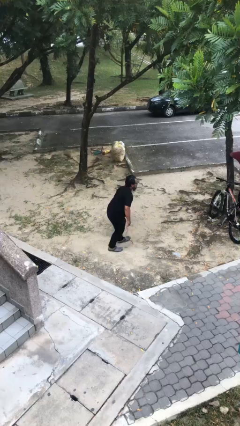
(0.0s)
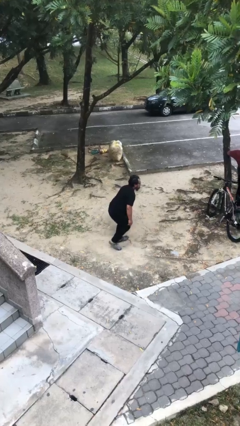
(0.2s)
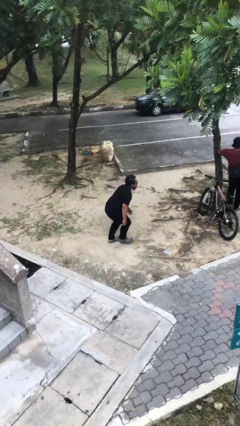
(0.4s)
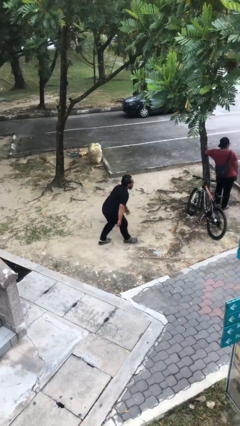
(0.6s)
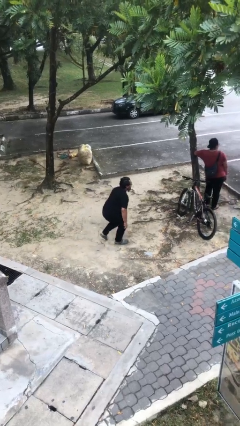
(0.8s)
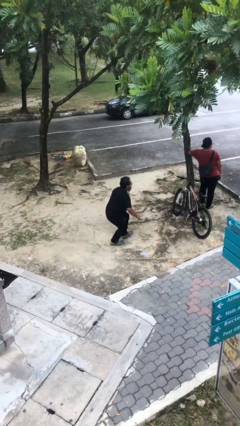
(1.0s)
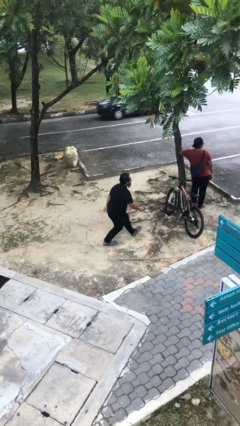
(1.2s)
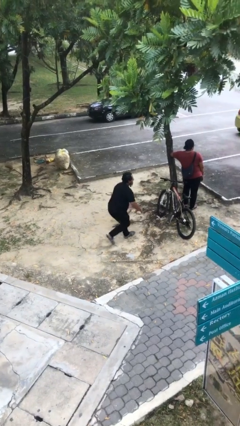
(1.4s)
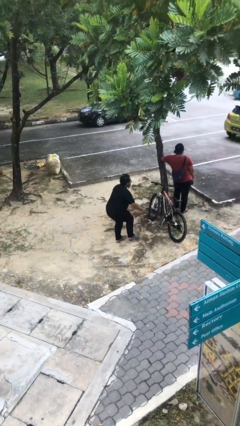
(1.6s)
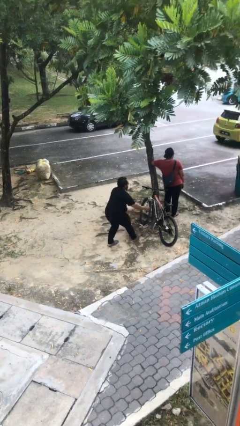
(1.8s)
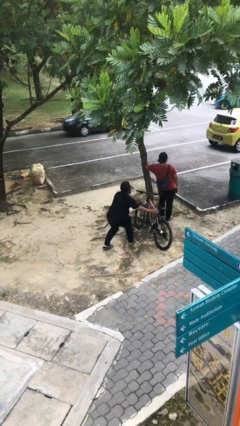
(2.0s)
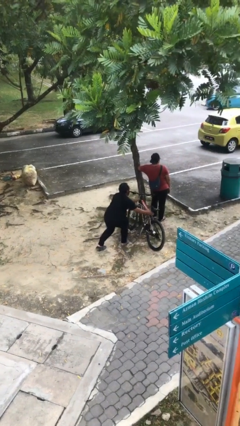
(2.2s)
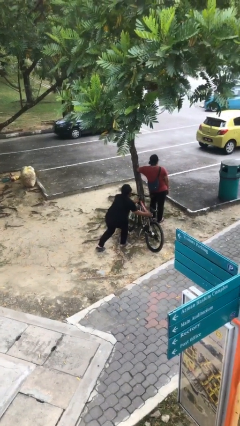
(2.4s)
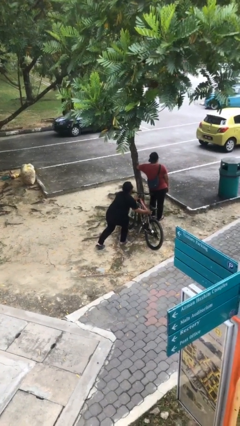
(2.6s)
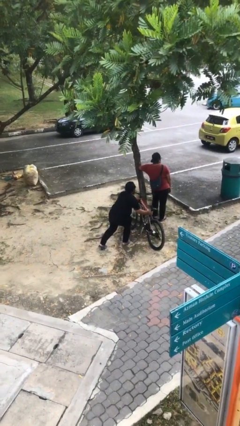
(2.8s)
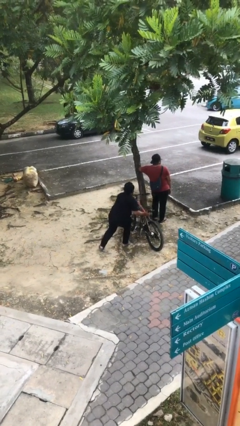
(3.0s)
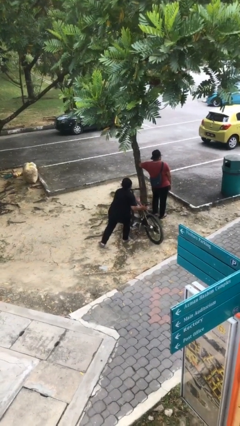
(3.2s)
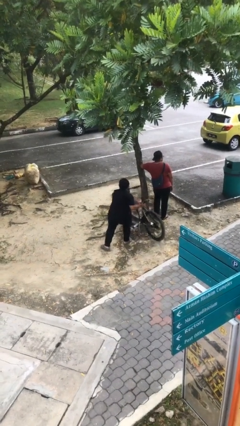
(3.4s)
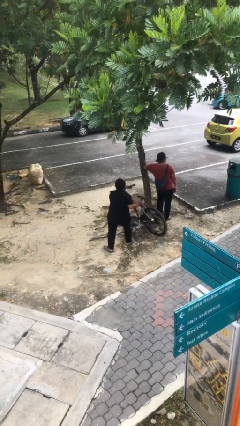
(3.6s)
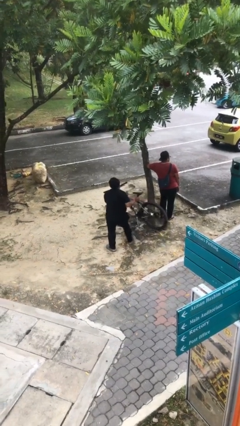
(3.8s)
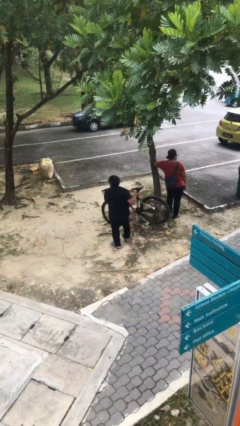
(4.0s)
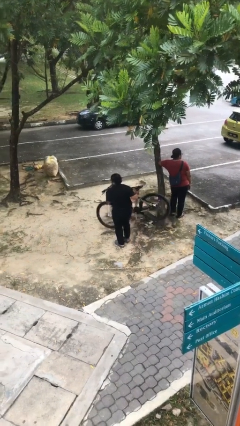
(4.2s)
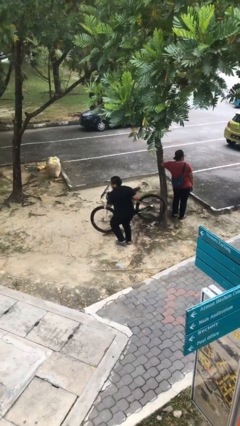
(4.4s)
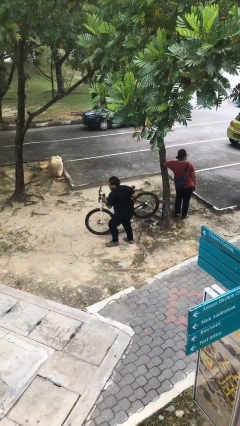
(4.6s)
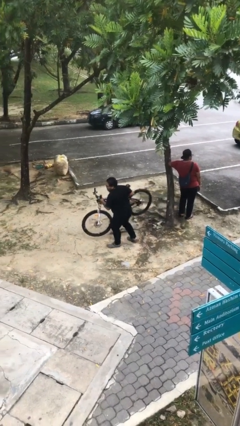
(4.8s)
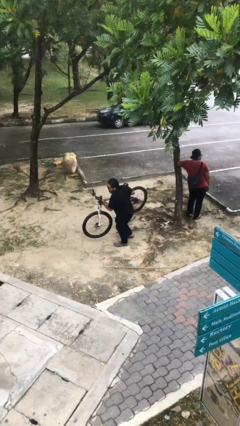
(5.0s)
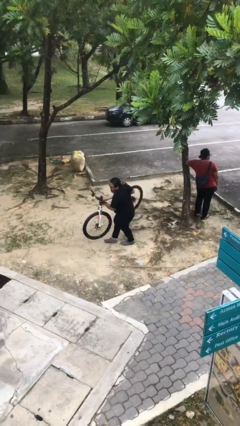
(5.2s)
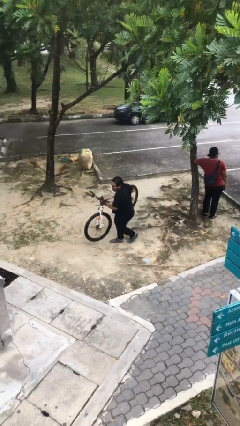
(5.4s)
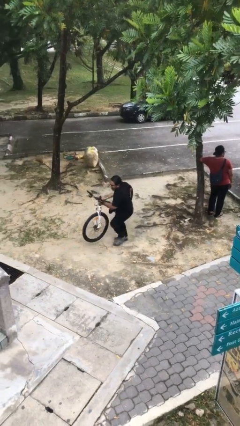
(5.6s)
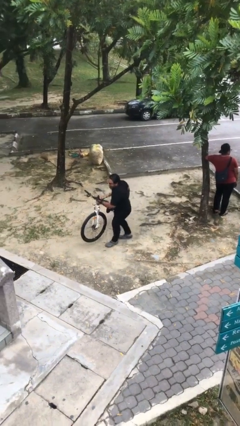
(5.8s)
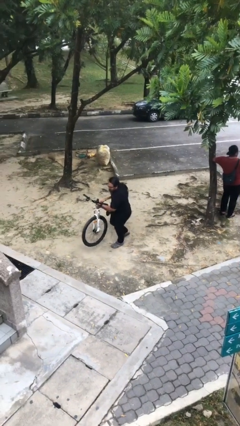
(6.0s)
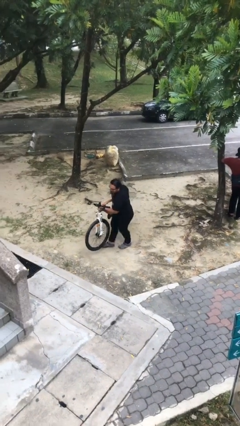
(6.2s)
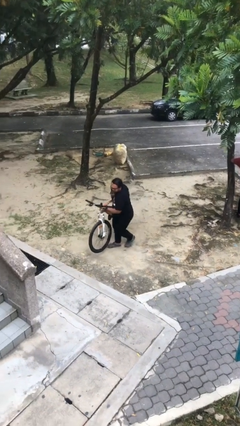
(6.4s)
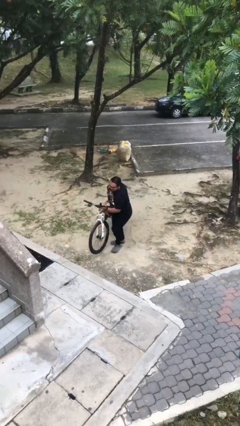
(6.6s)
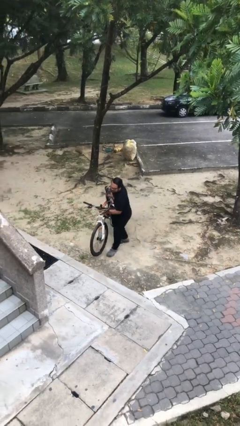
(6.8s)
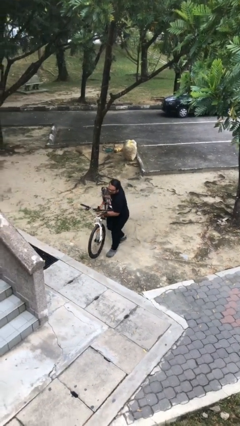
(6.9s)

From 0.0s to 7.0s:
person steals object from person

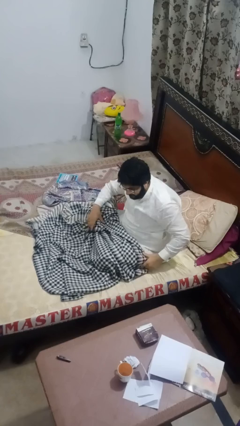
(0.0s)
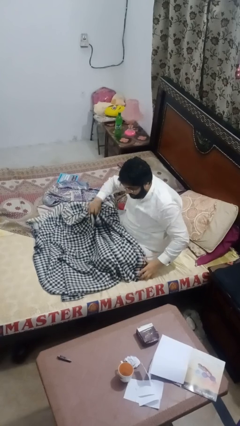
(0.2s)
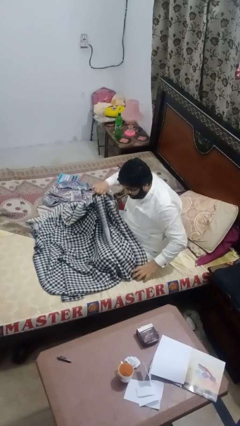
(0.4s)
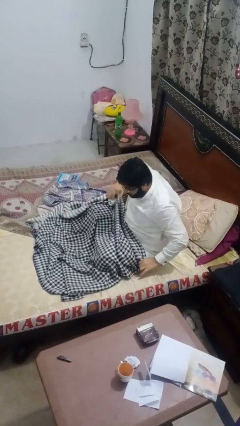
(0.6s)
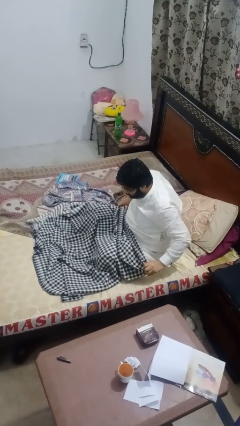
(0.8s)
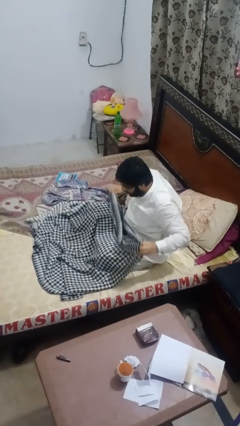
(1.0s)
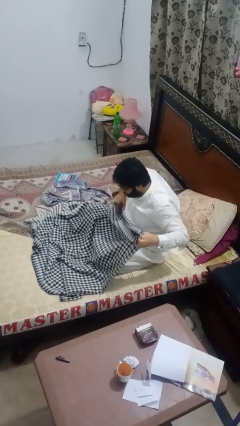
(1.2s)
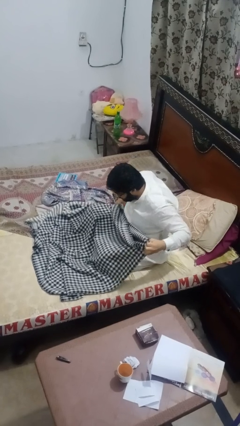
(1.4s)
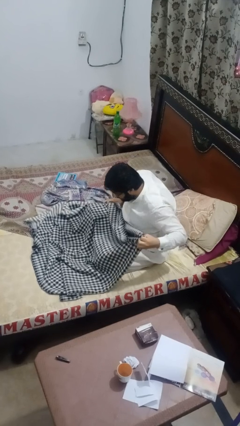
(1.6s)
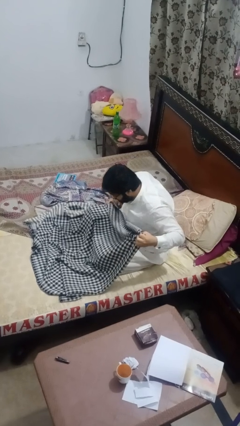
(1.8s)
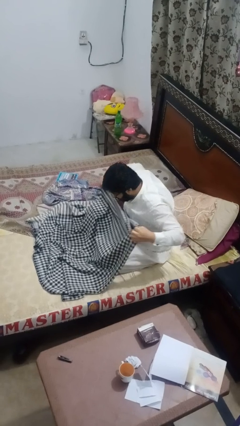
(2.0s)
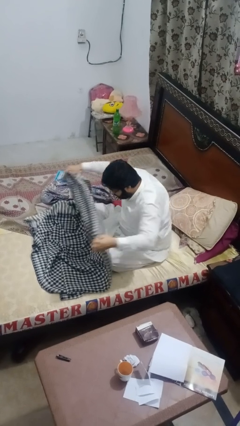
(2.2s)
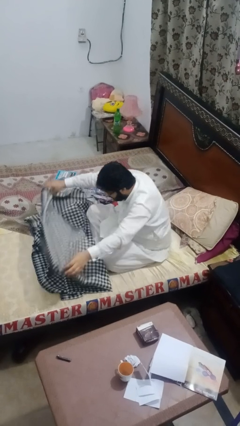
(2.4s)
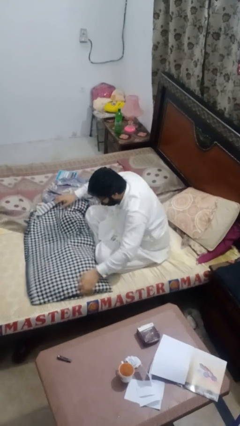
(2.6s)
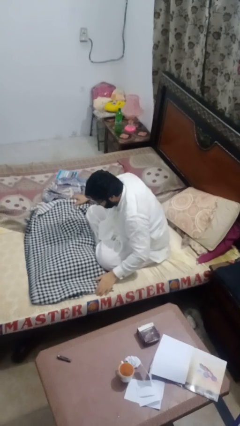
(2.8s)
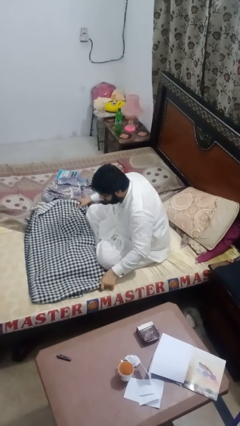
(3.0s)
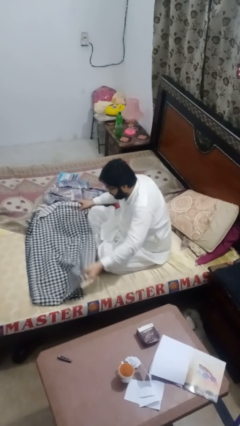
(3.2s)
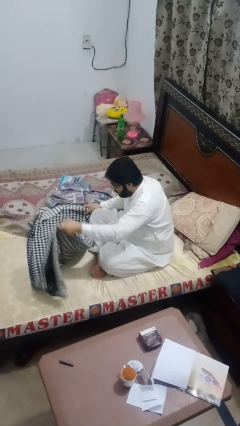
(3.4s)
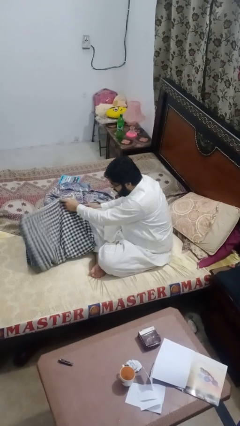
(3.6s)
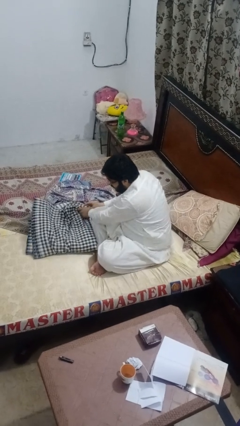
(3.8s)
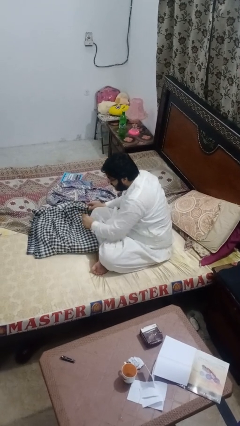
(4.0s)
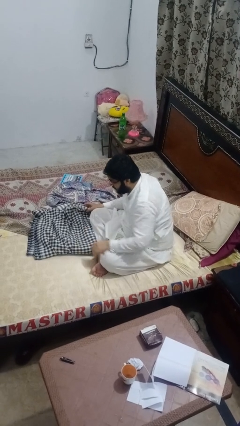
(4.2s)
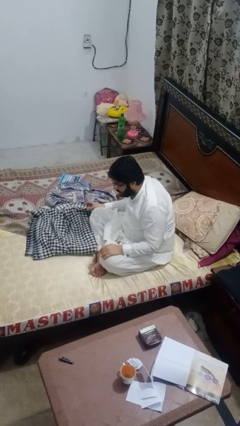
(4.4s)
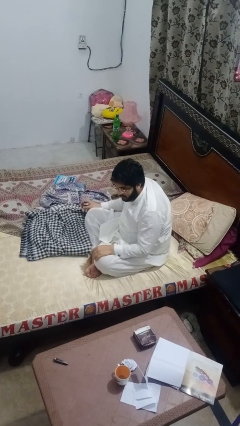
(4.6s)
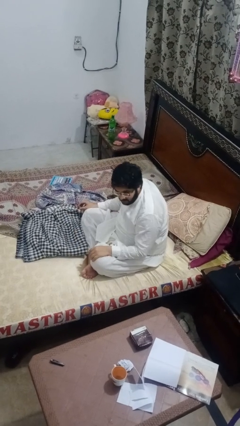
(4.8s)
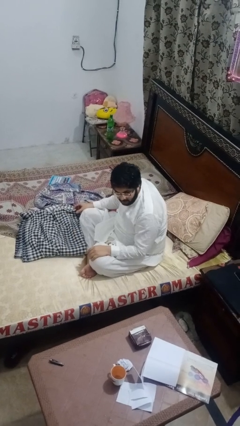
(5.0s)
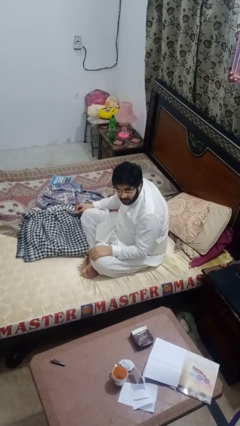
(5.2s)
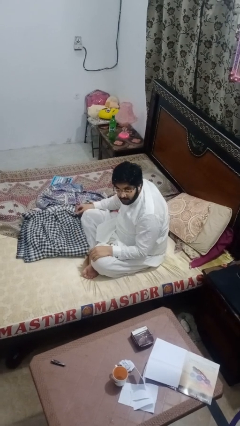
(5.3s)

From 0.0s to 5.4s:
person folds blanket

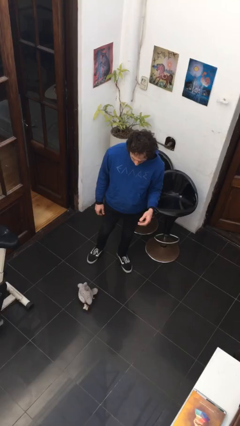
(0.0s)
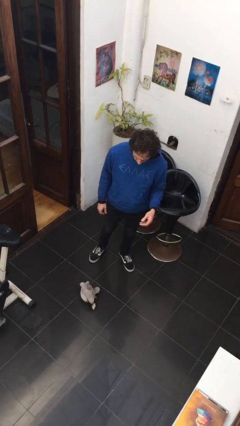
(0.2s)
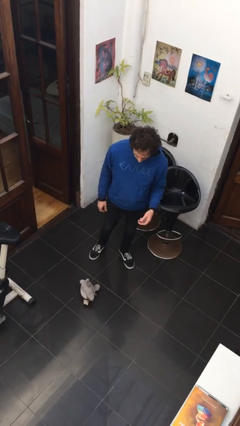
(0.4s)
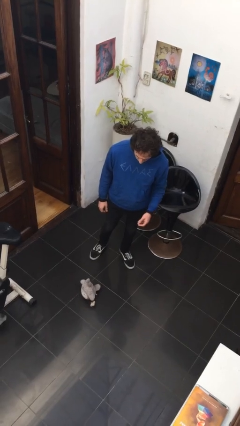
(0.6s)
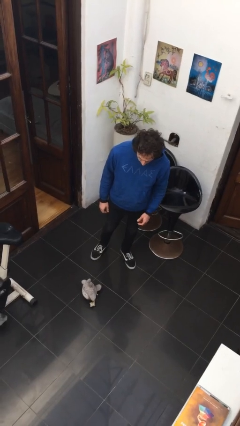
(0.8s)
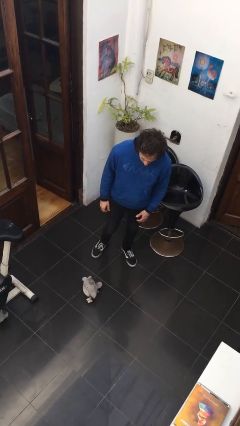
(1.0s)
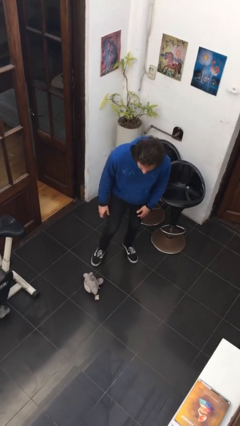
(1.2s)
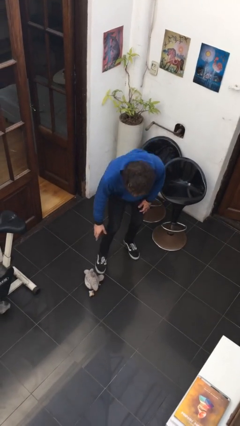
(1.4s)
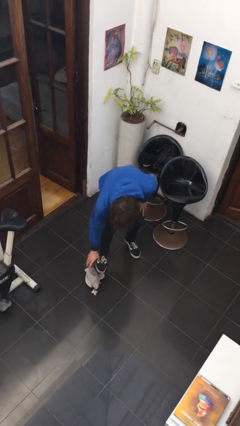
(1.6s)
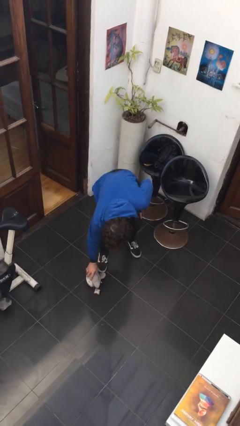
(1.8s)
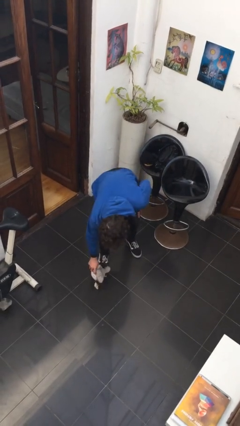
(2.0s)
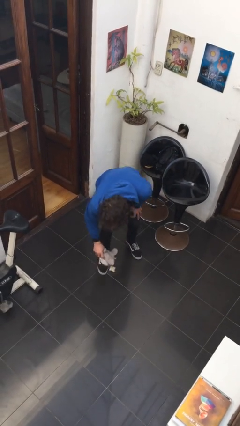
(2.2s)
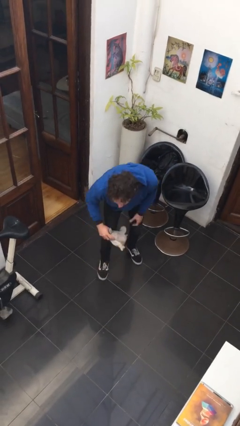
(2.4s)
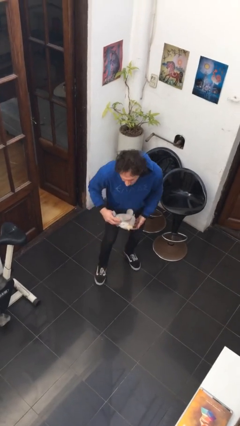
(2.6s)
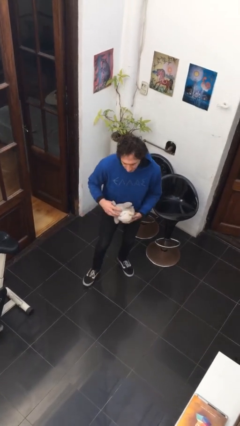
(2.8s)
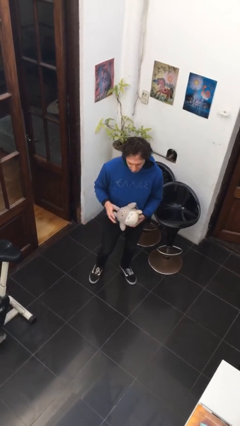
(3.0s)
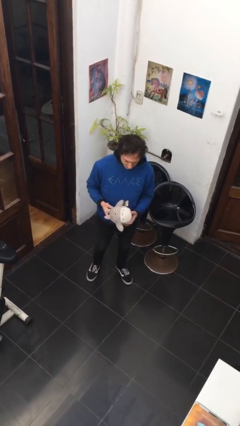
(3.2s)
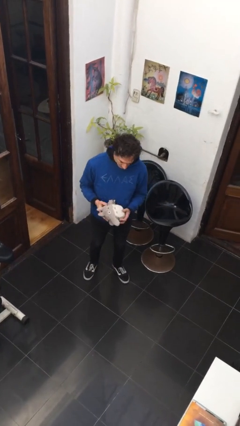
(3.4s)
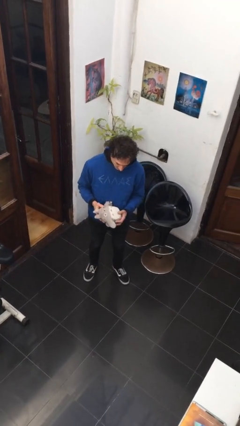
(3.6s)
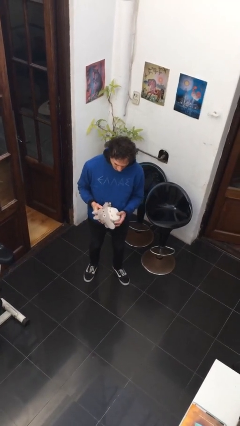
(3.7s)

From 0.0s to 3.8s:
person picks up object from floor

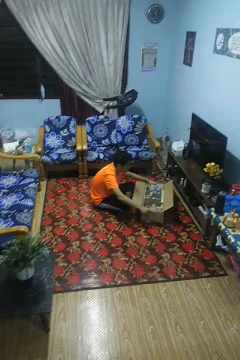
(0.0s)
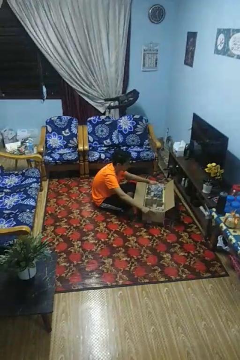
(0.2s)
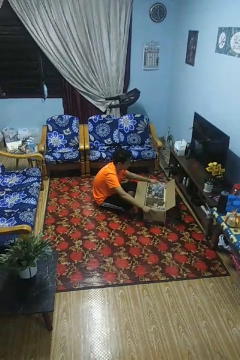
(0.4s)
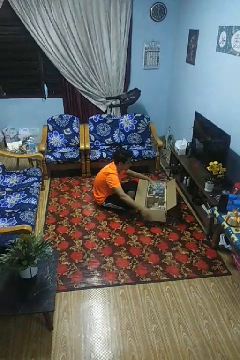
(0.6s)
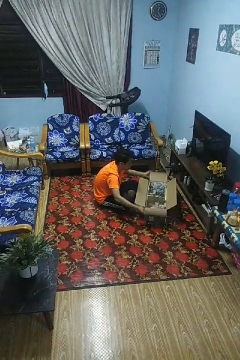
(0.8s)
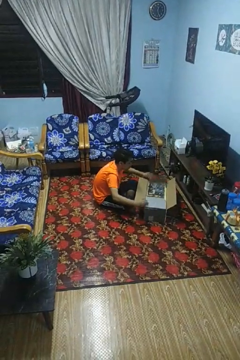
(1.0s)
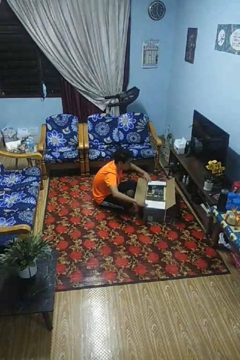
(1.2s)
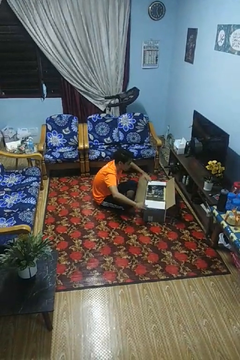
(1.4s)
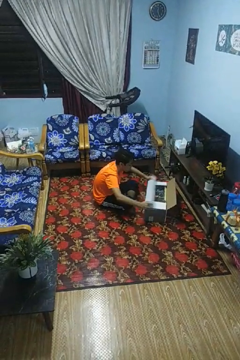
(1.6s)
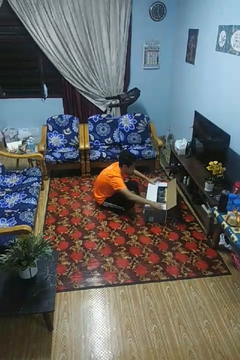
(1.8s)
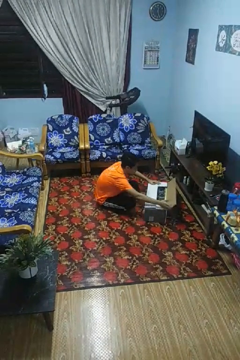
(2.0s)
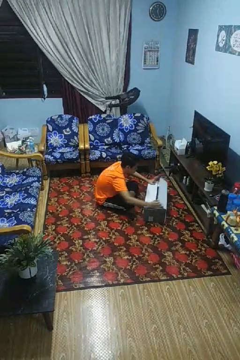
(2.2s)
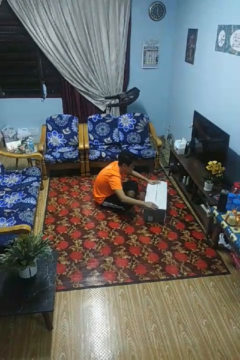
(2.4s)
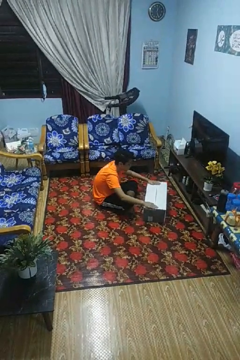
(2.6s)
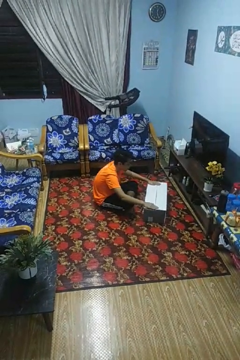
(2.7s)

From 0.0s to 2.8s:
person closes box
